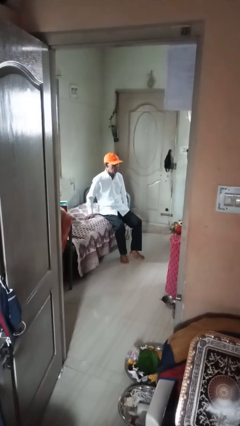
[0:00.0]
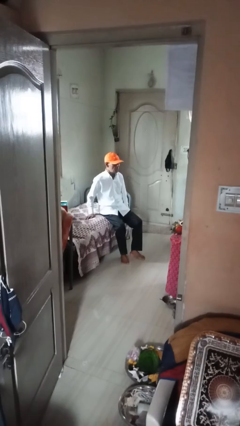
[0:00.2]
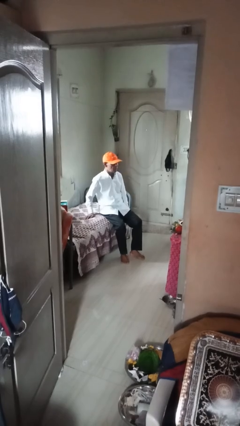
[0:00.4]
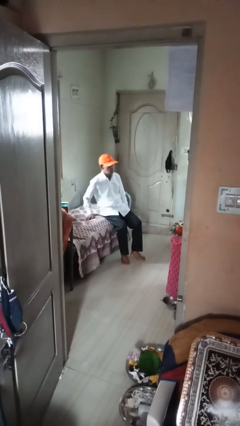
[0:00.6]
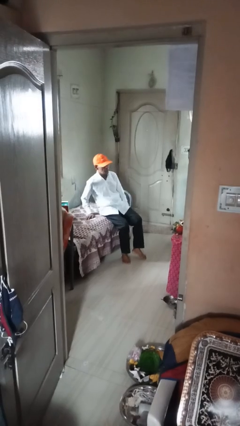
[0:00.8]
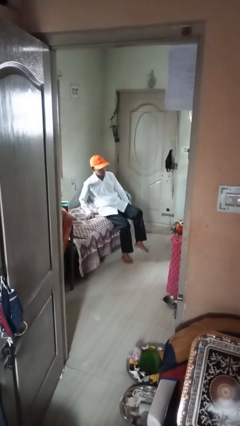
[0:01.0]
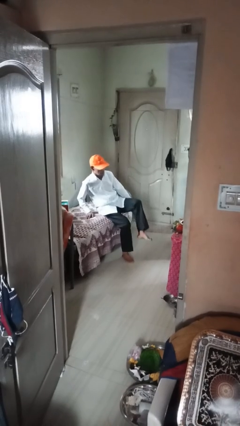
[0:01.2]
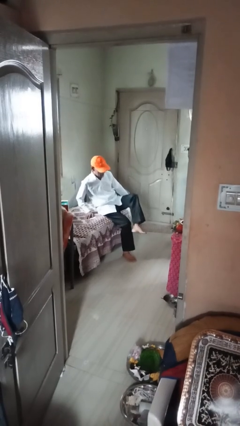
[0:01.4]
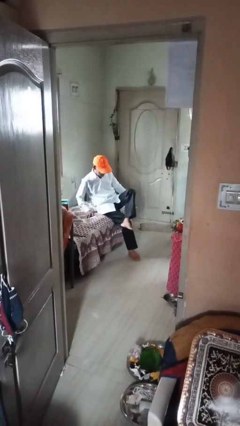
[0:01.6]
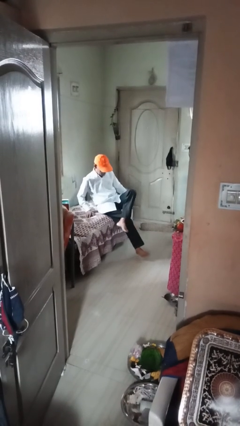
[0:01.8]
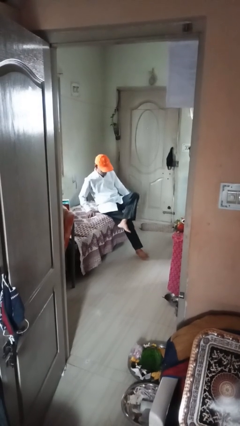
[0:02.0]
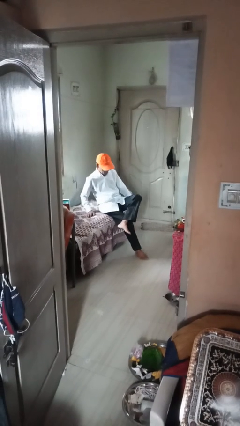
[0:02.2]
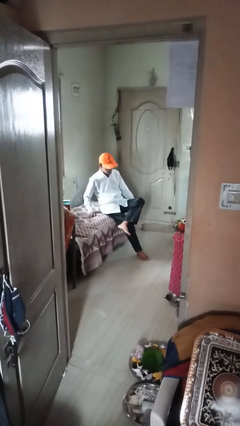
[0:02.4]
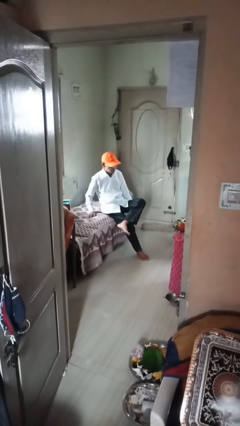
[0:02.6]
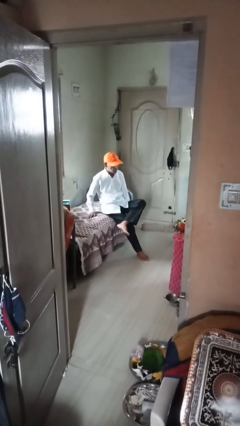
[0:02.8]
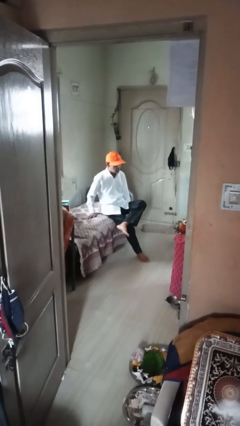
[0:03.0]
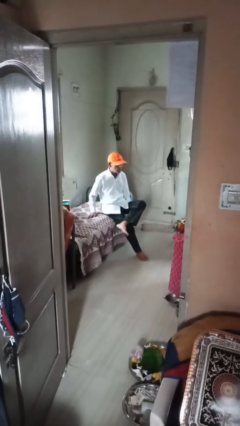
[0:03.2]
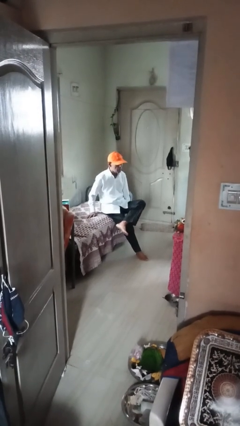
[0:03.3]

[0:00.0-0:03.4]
person crosses legs

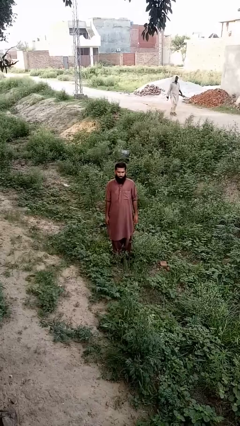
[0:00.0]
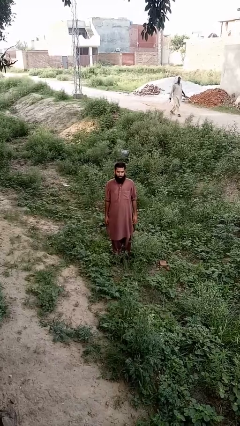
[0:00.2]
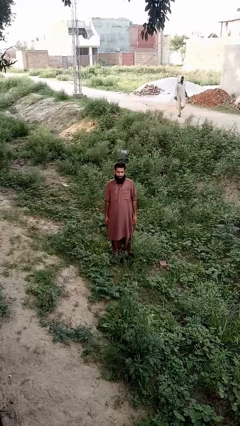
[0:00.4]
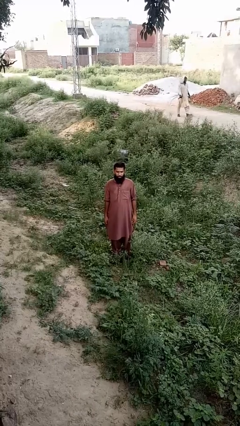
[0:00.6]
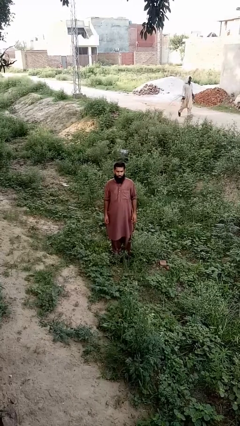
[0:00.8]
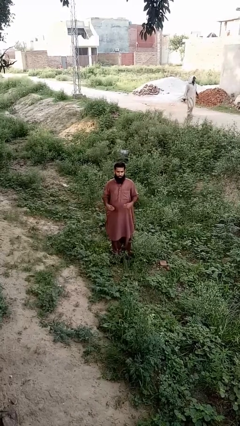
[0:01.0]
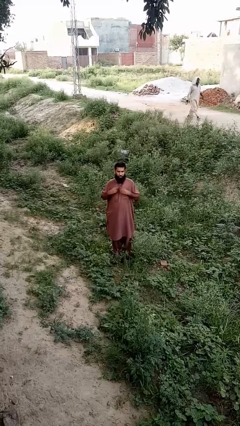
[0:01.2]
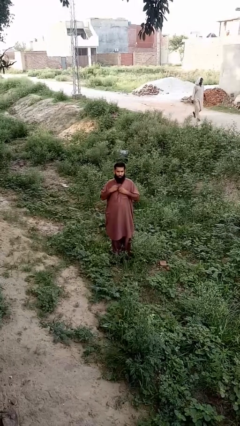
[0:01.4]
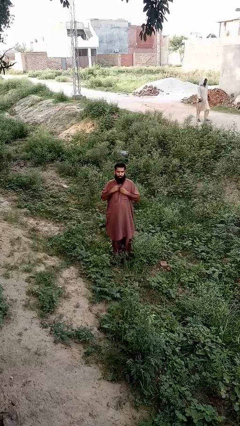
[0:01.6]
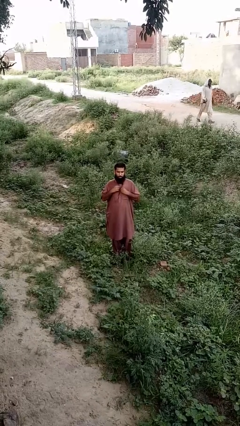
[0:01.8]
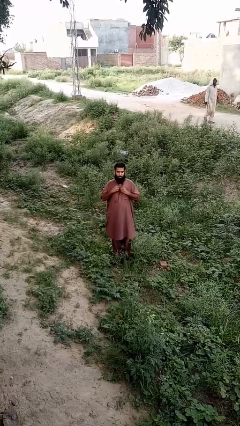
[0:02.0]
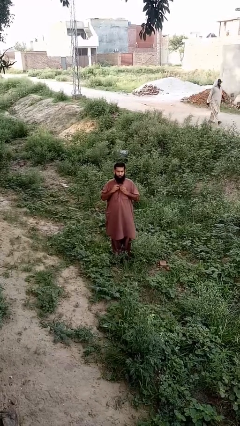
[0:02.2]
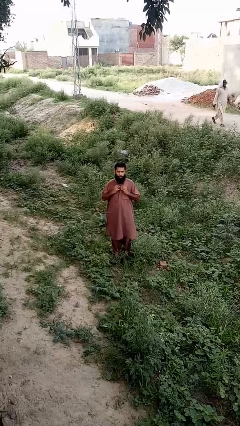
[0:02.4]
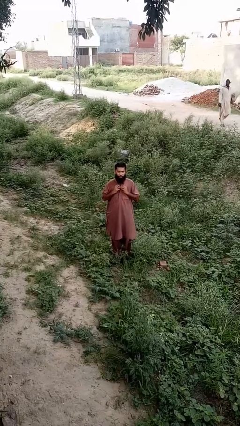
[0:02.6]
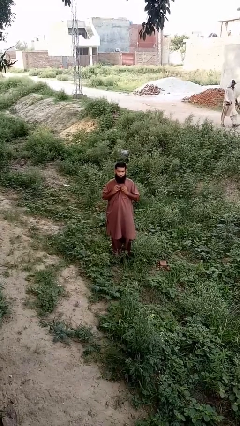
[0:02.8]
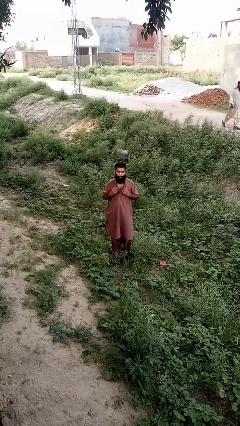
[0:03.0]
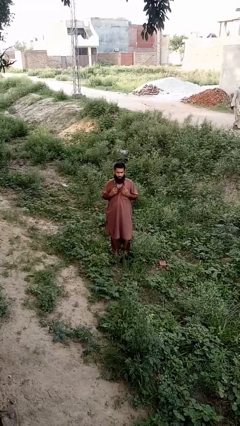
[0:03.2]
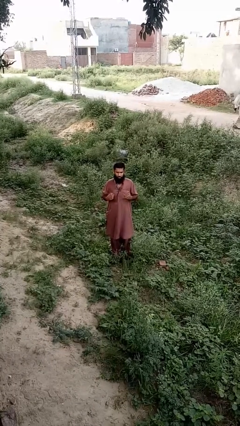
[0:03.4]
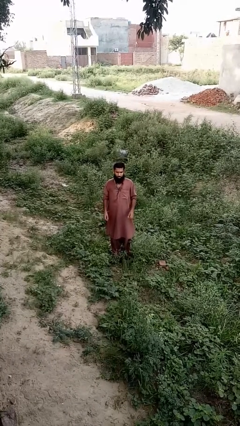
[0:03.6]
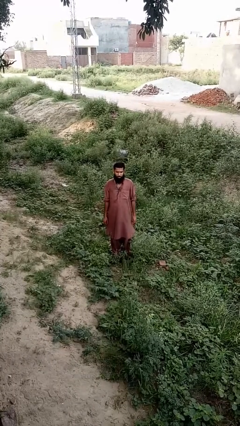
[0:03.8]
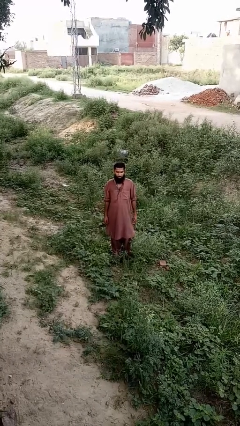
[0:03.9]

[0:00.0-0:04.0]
person unbuttons shirt

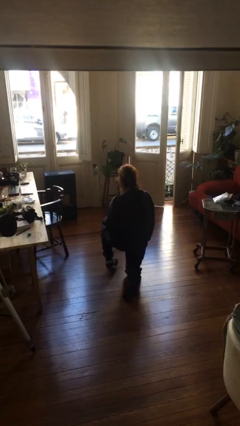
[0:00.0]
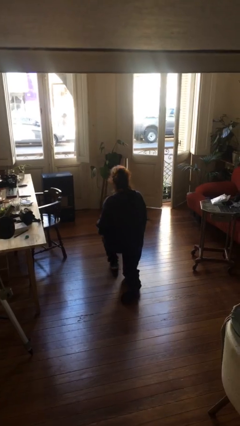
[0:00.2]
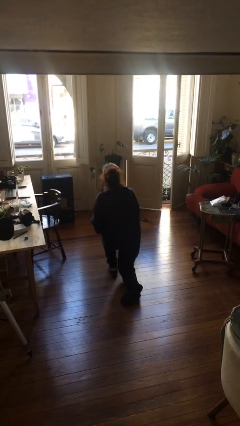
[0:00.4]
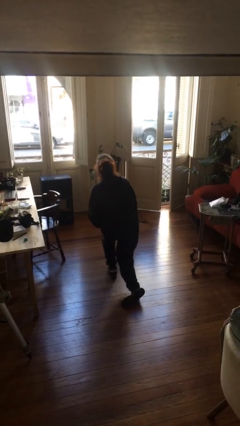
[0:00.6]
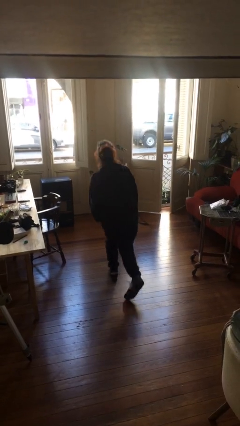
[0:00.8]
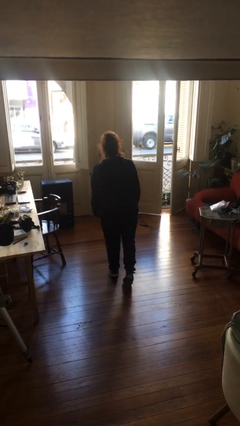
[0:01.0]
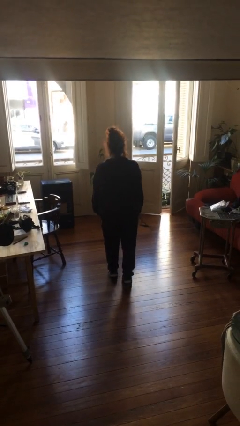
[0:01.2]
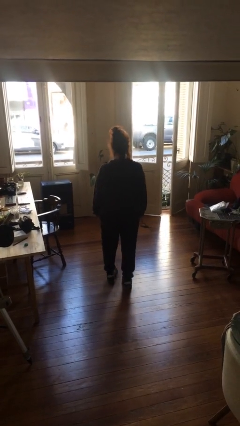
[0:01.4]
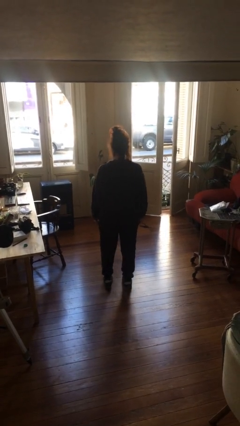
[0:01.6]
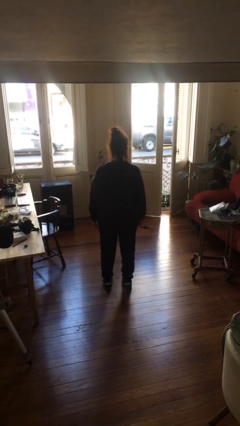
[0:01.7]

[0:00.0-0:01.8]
person stands up from floor

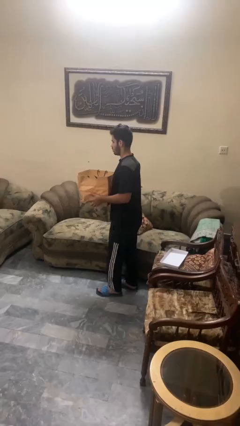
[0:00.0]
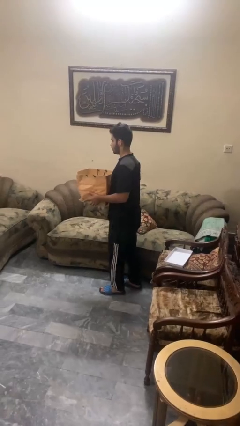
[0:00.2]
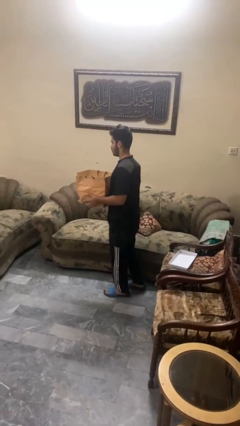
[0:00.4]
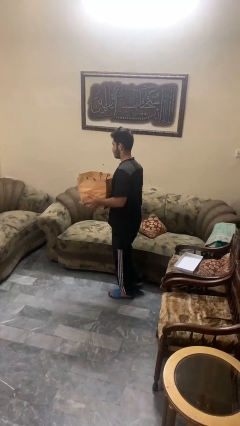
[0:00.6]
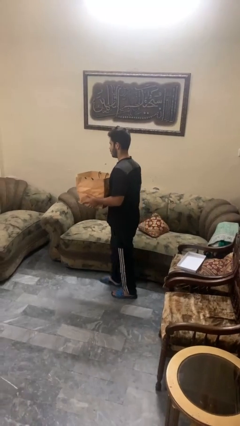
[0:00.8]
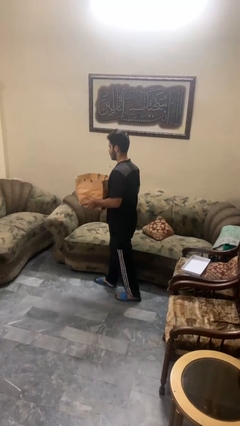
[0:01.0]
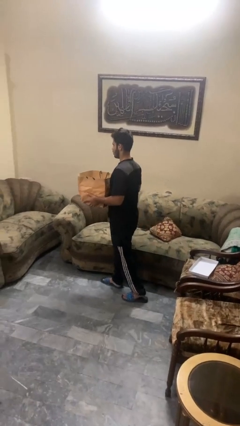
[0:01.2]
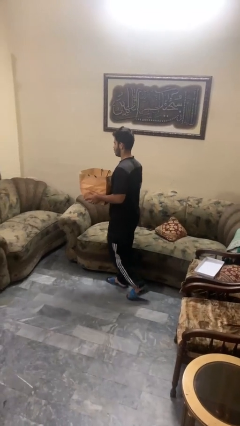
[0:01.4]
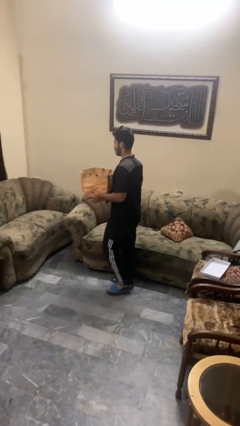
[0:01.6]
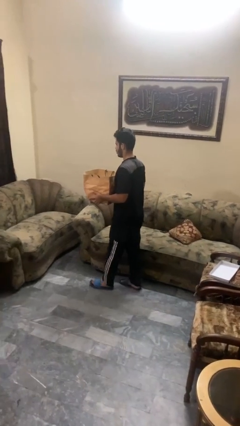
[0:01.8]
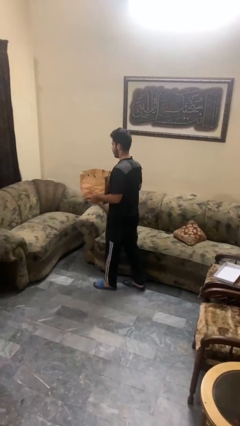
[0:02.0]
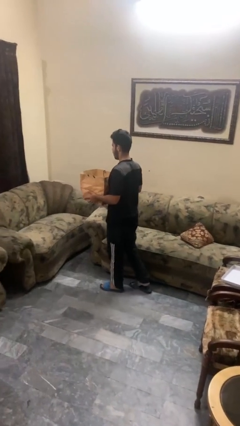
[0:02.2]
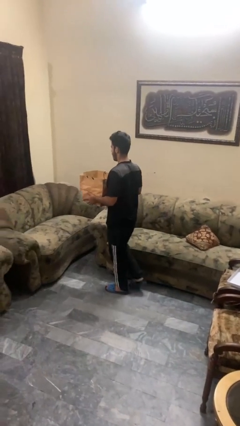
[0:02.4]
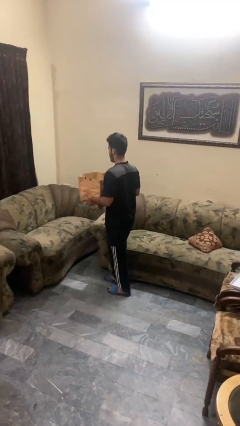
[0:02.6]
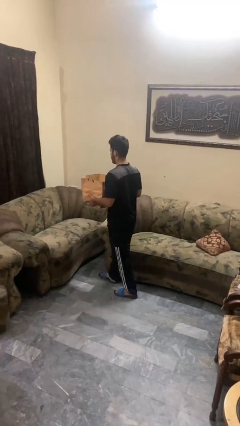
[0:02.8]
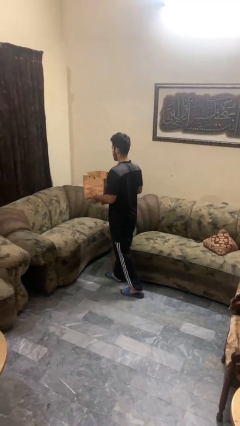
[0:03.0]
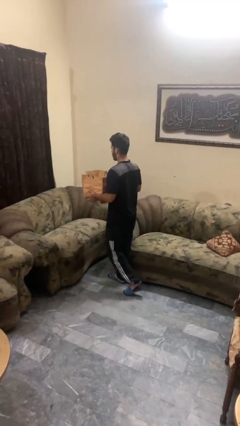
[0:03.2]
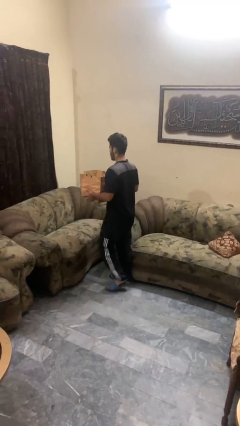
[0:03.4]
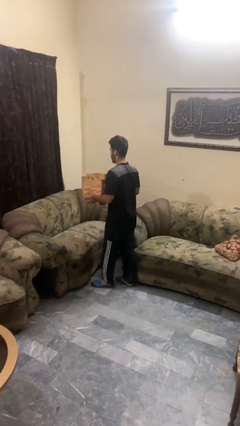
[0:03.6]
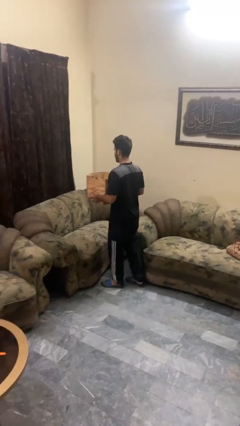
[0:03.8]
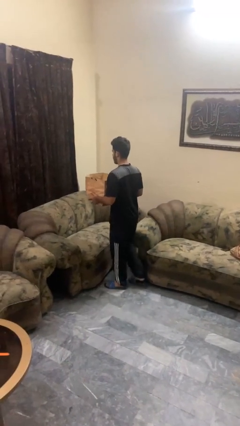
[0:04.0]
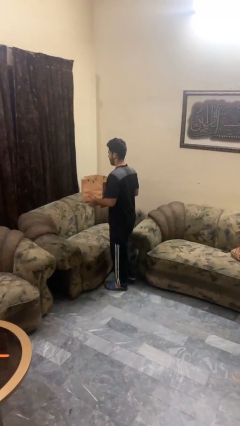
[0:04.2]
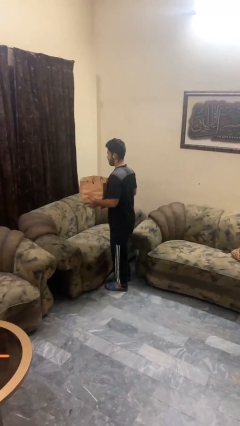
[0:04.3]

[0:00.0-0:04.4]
person carries groceries

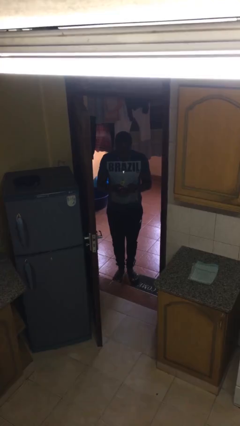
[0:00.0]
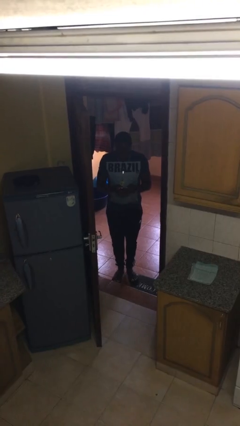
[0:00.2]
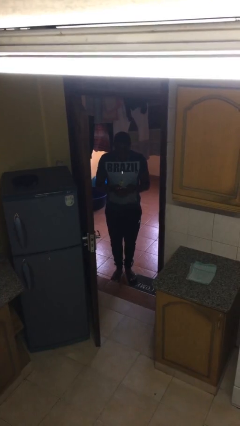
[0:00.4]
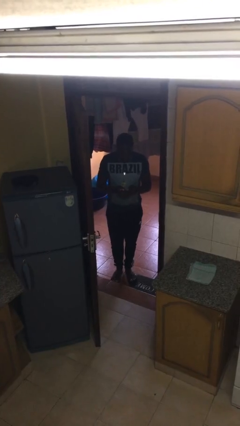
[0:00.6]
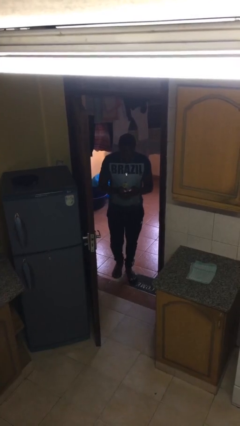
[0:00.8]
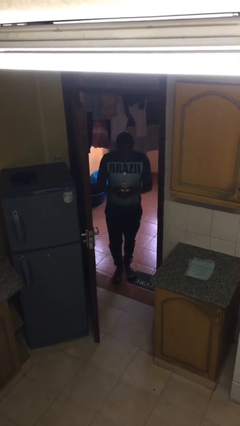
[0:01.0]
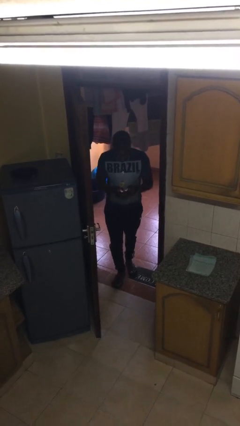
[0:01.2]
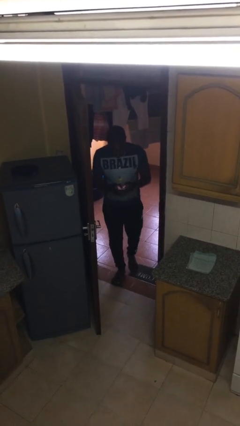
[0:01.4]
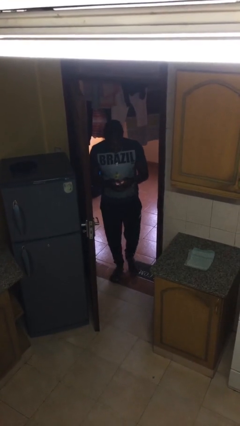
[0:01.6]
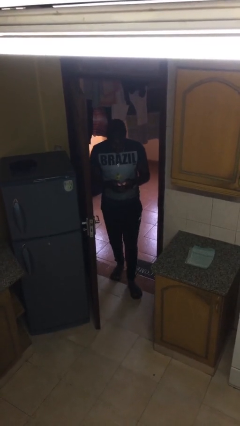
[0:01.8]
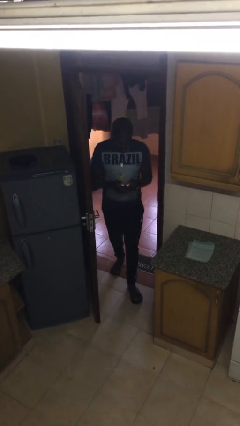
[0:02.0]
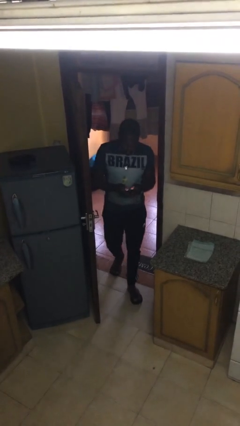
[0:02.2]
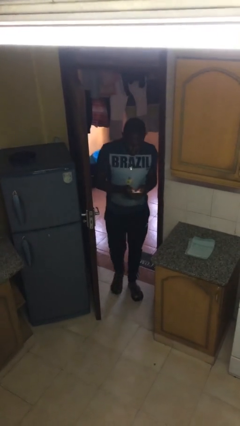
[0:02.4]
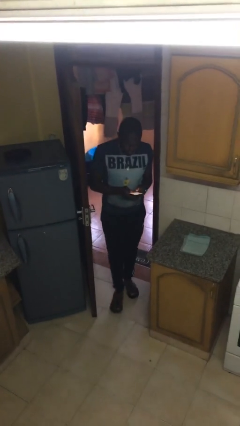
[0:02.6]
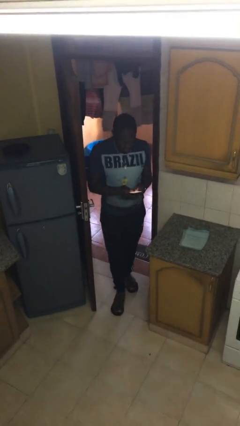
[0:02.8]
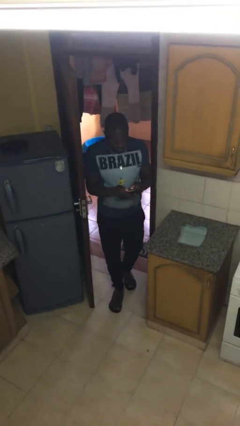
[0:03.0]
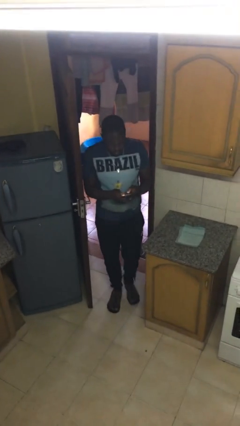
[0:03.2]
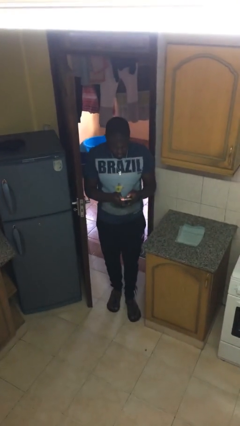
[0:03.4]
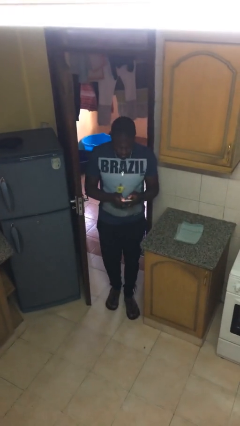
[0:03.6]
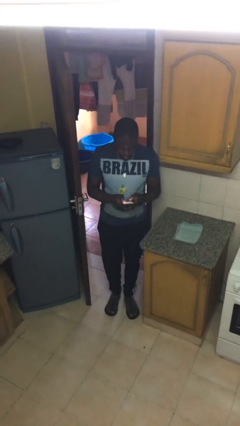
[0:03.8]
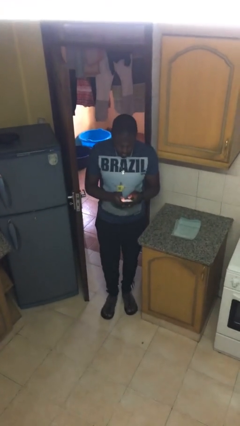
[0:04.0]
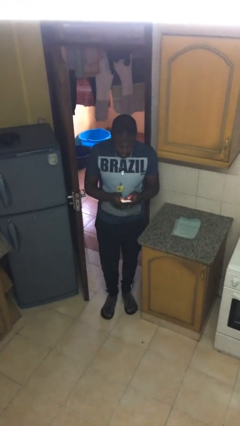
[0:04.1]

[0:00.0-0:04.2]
person enters scene through structure
